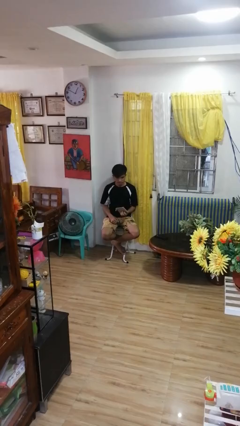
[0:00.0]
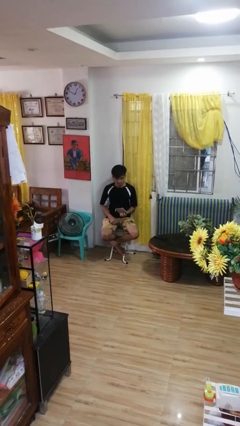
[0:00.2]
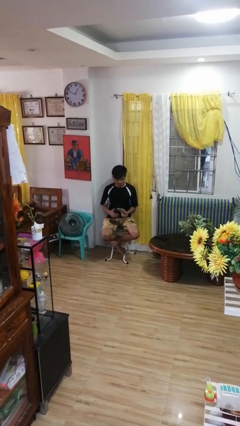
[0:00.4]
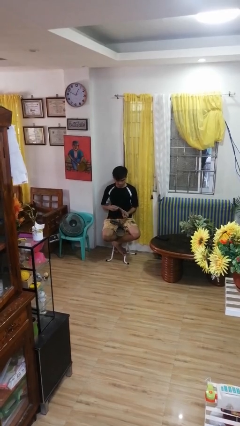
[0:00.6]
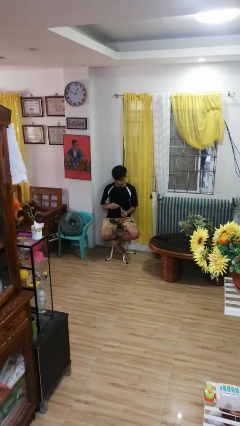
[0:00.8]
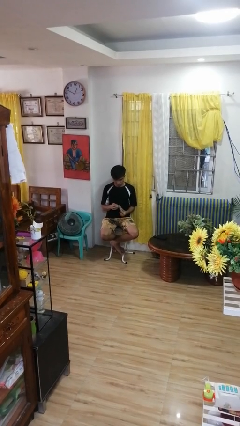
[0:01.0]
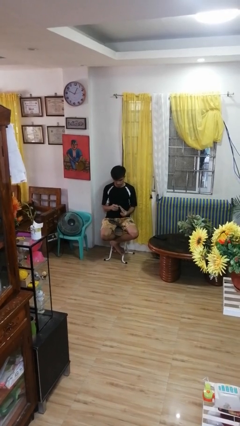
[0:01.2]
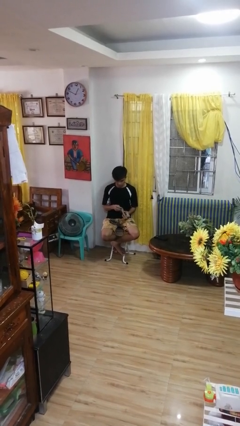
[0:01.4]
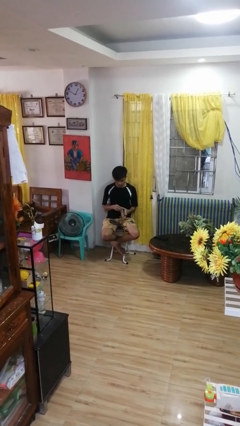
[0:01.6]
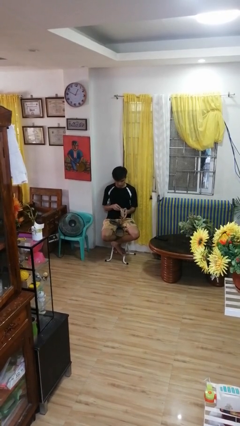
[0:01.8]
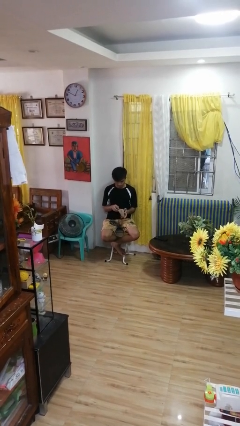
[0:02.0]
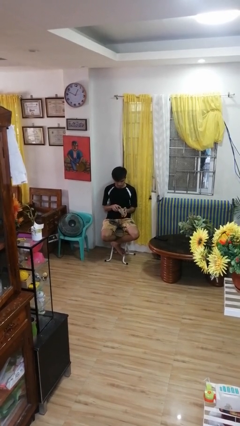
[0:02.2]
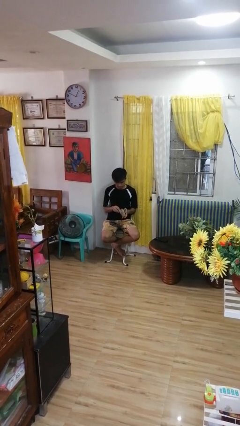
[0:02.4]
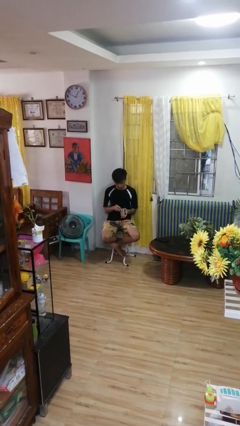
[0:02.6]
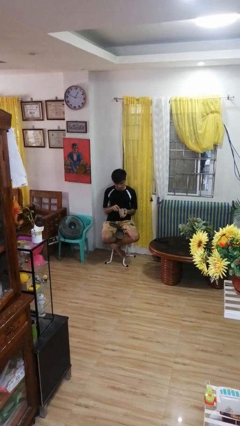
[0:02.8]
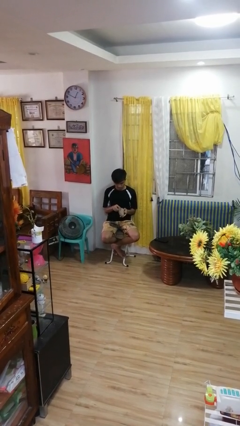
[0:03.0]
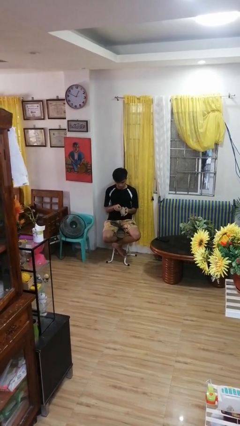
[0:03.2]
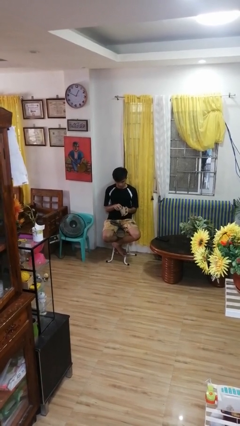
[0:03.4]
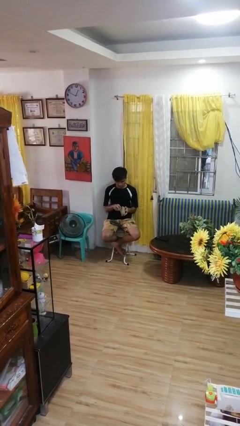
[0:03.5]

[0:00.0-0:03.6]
person searches in purse

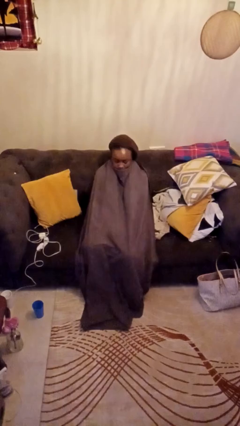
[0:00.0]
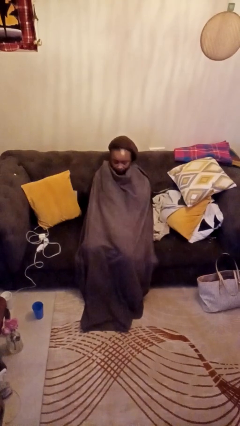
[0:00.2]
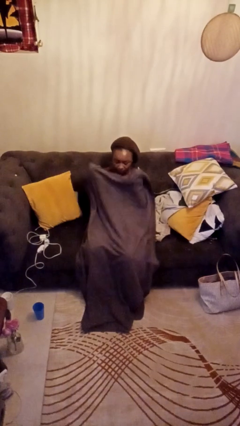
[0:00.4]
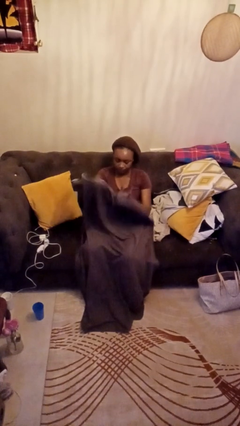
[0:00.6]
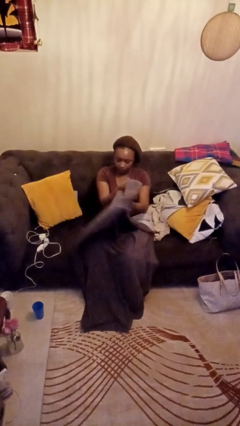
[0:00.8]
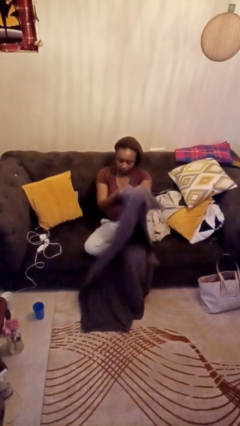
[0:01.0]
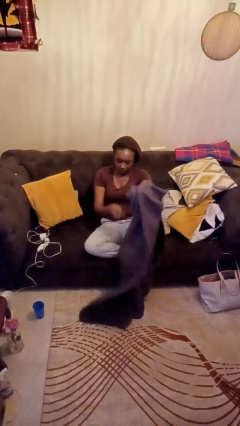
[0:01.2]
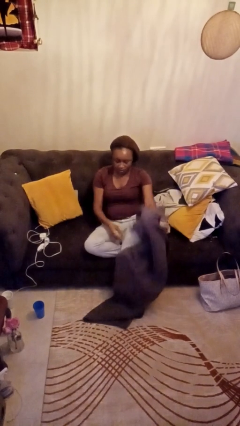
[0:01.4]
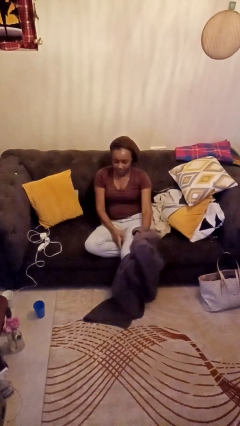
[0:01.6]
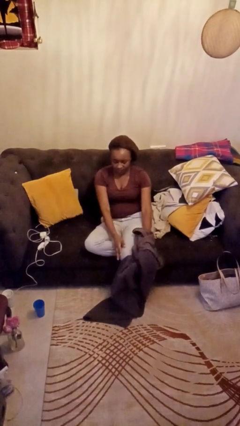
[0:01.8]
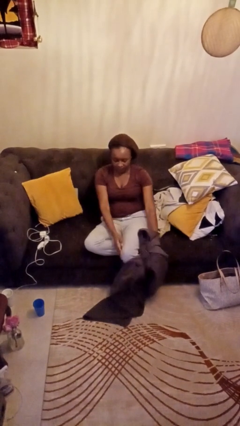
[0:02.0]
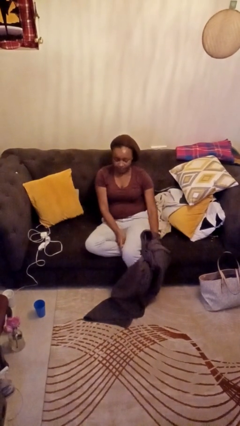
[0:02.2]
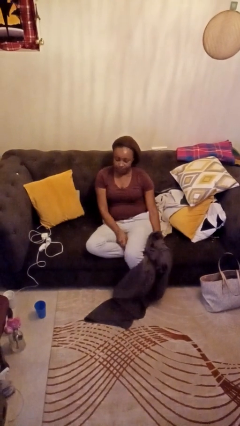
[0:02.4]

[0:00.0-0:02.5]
person uncovers with blanket

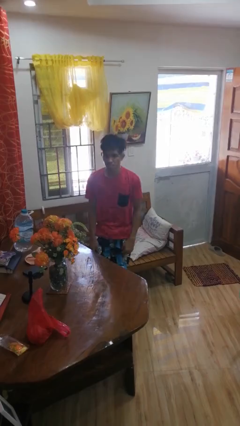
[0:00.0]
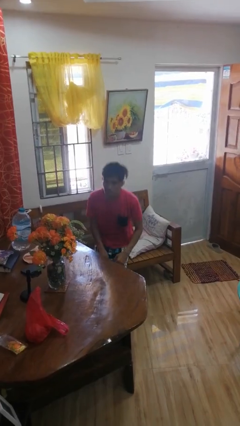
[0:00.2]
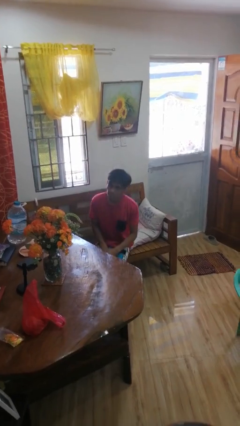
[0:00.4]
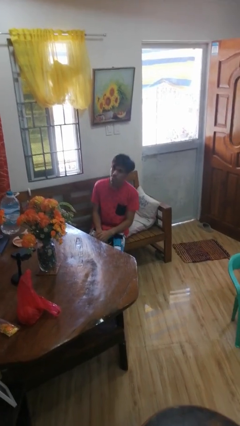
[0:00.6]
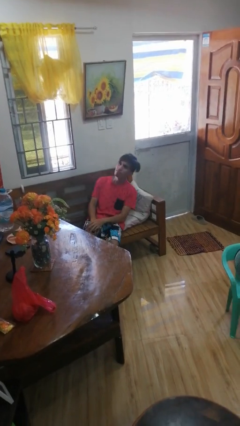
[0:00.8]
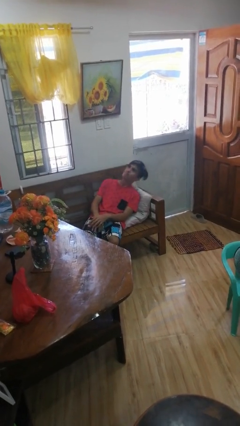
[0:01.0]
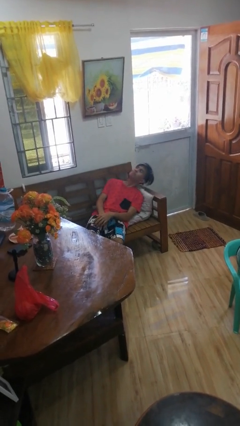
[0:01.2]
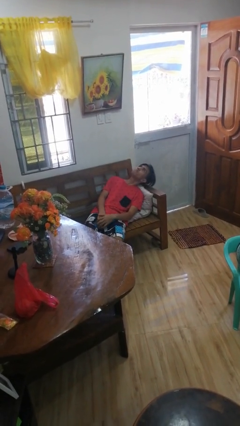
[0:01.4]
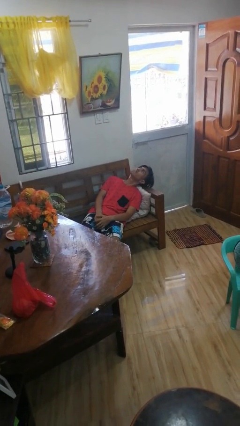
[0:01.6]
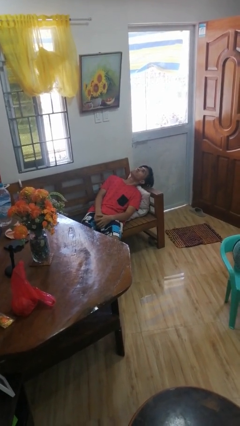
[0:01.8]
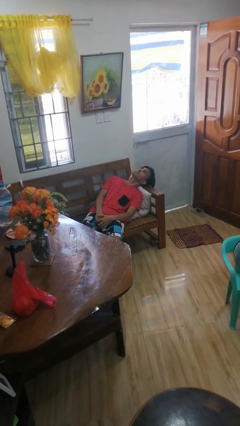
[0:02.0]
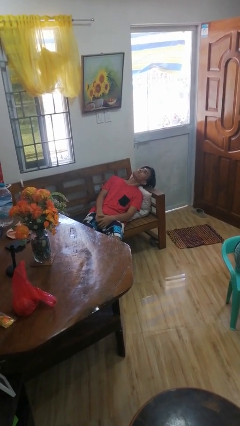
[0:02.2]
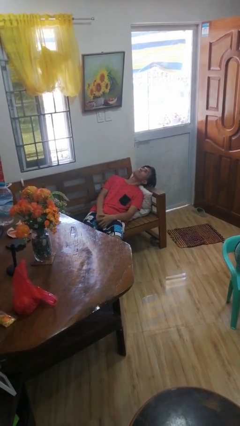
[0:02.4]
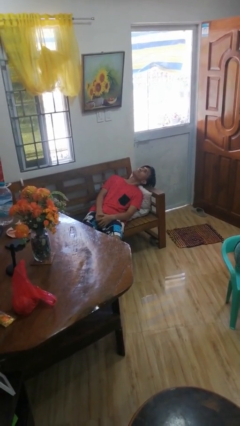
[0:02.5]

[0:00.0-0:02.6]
person lies down on couch

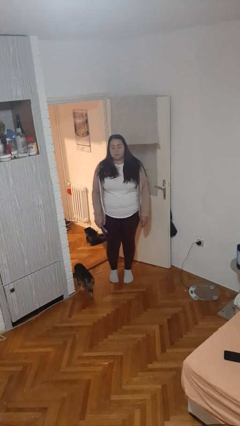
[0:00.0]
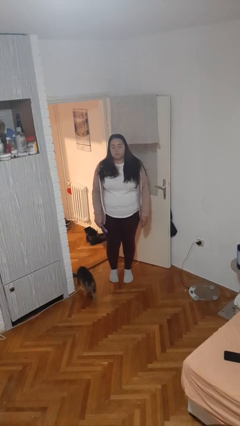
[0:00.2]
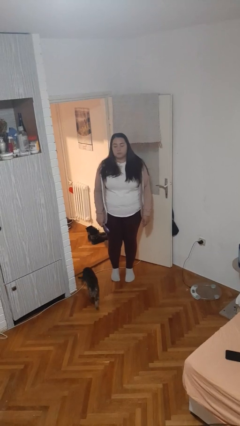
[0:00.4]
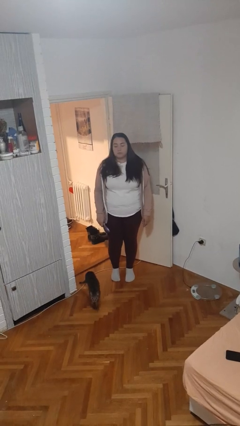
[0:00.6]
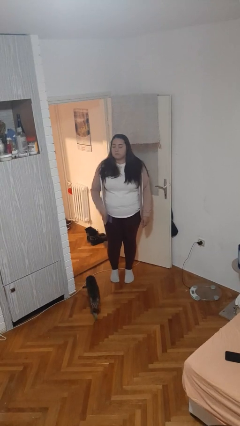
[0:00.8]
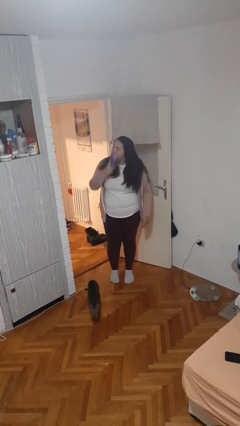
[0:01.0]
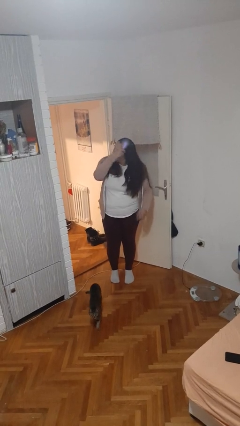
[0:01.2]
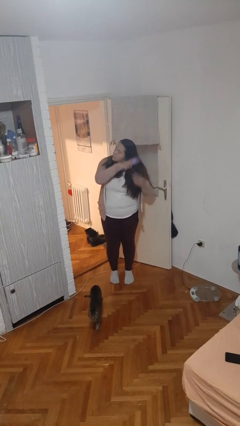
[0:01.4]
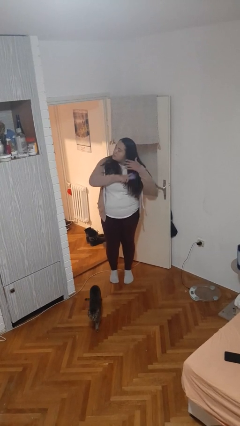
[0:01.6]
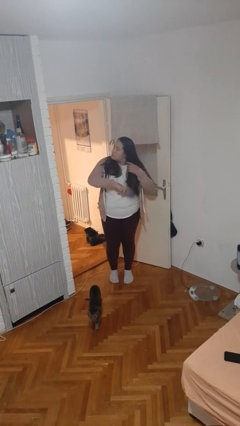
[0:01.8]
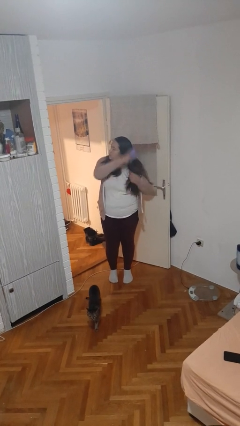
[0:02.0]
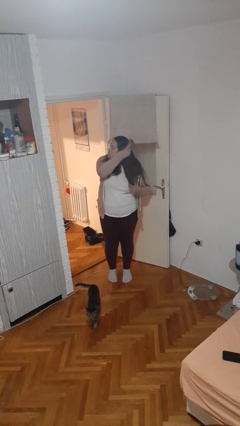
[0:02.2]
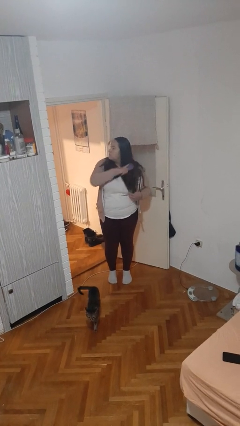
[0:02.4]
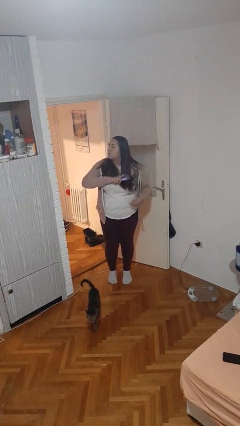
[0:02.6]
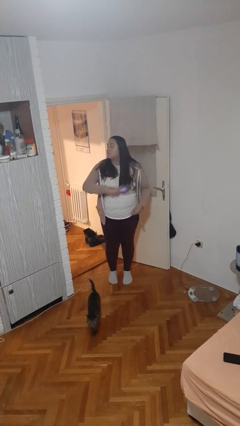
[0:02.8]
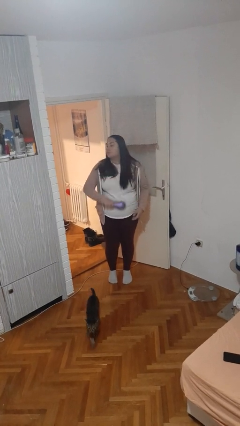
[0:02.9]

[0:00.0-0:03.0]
person brushes hair

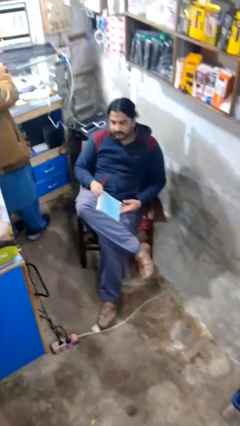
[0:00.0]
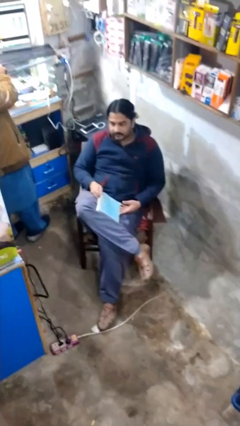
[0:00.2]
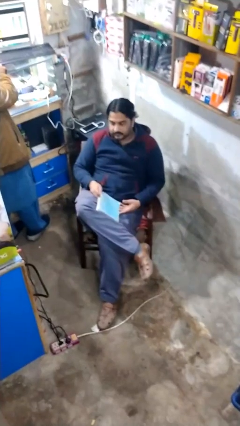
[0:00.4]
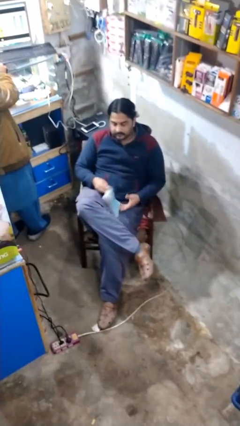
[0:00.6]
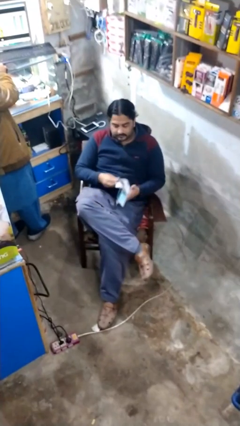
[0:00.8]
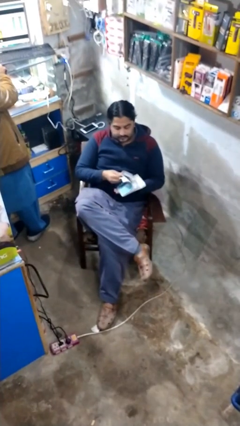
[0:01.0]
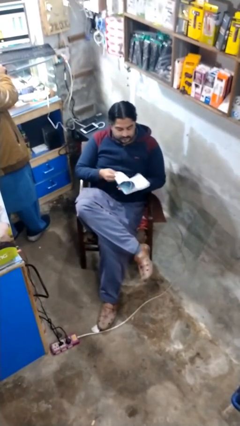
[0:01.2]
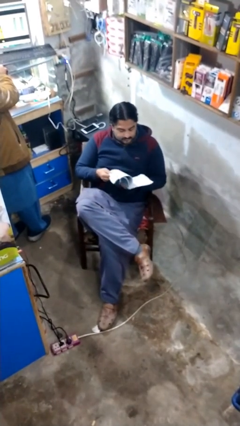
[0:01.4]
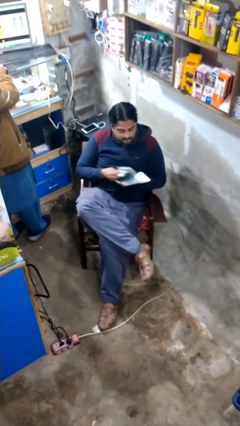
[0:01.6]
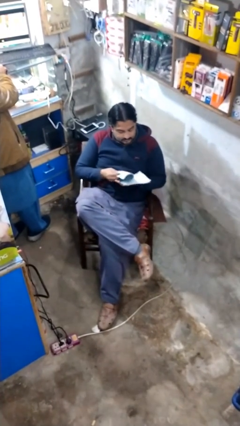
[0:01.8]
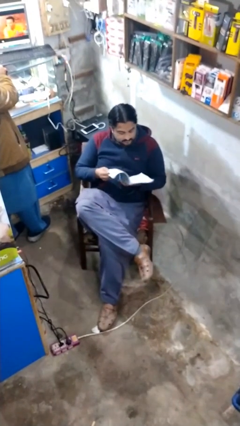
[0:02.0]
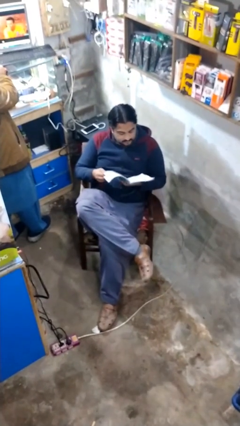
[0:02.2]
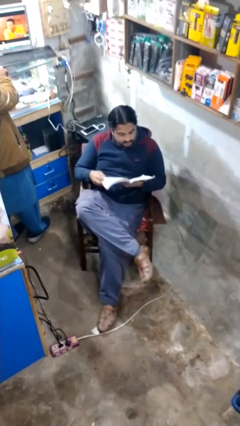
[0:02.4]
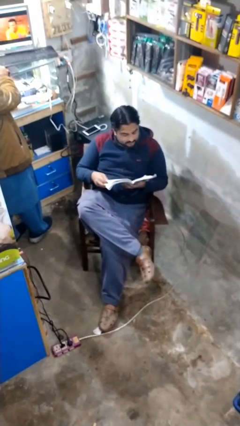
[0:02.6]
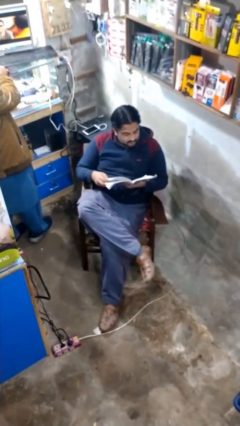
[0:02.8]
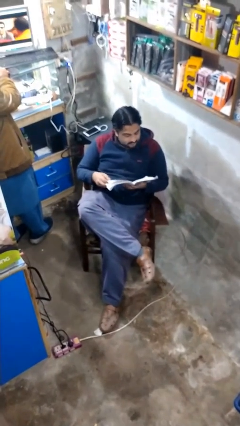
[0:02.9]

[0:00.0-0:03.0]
person reads document

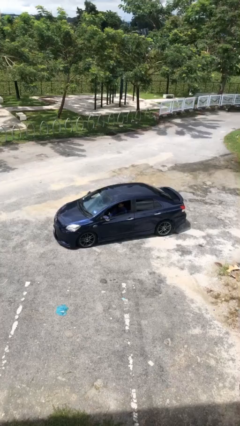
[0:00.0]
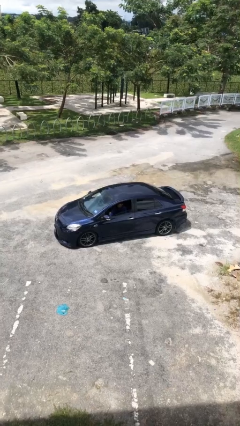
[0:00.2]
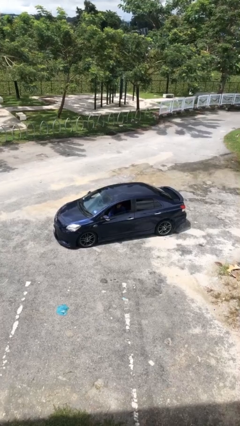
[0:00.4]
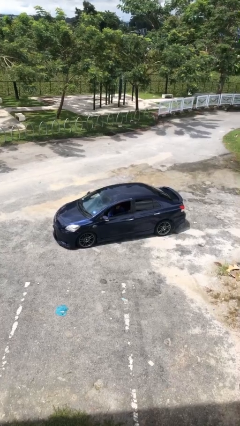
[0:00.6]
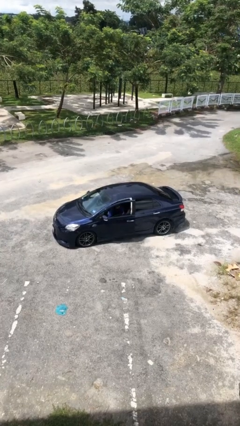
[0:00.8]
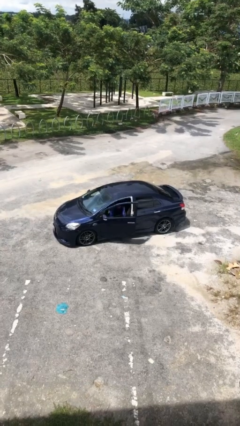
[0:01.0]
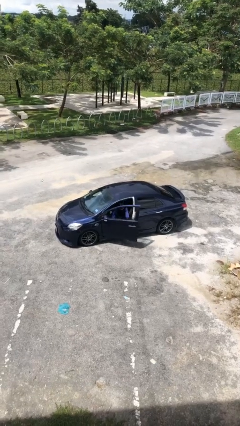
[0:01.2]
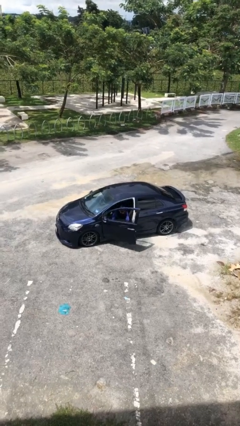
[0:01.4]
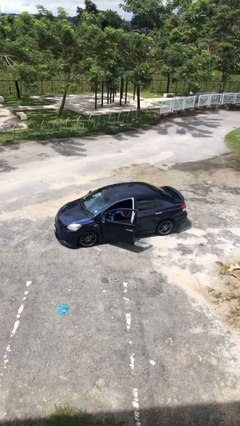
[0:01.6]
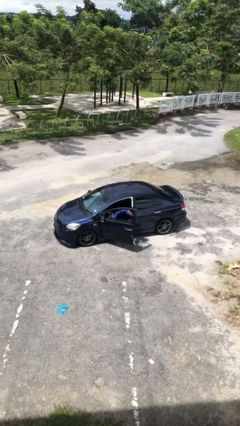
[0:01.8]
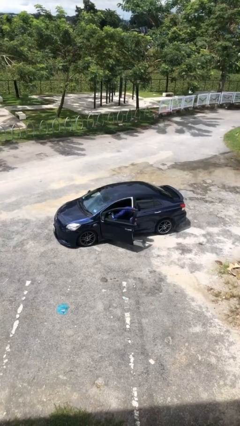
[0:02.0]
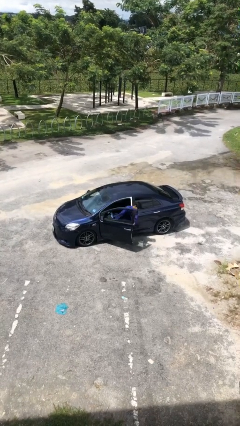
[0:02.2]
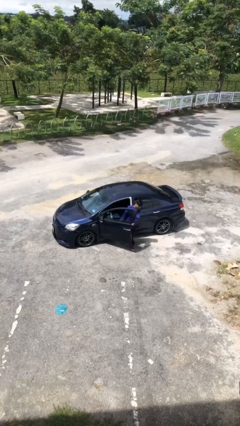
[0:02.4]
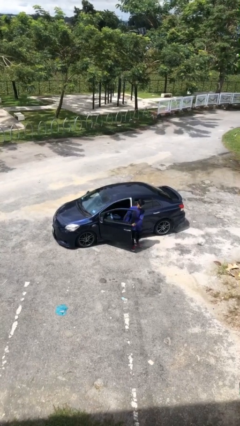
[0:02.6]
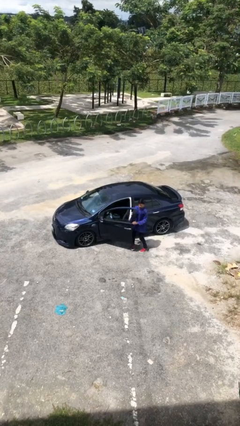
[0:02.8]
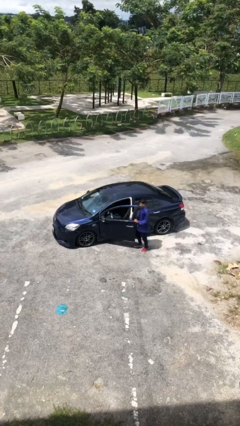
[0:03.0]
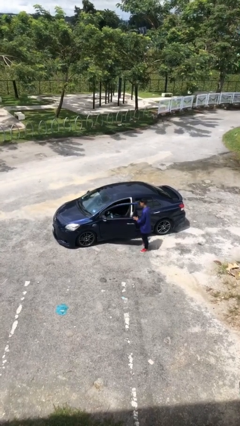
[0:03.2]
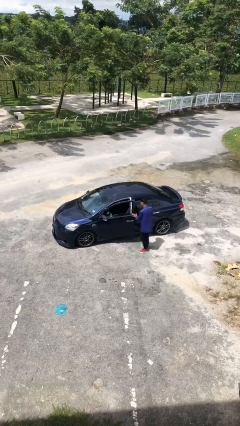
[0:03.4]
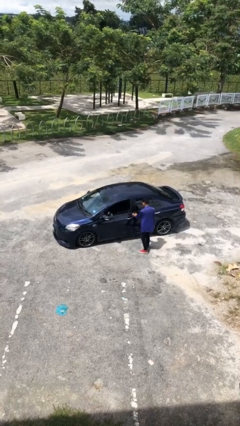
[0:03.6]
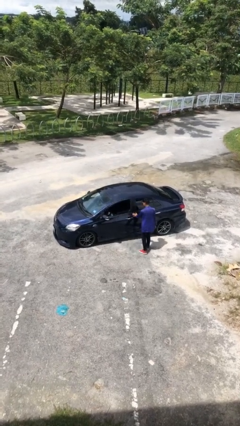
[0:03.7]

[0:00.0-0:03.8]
car drops off person
